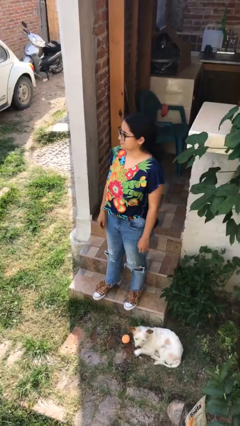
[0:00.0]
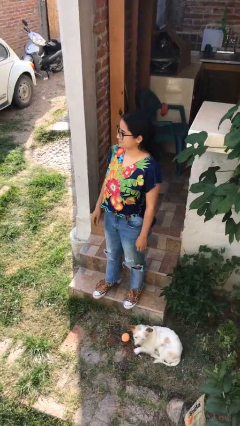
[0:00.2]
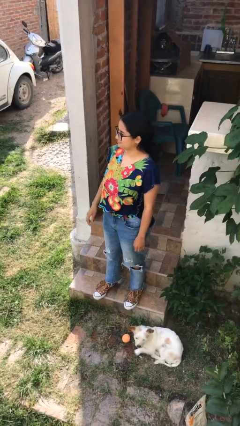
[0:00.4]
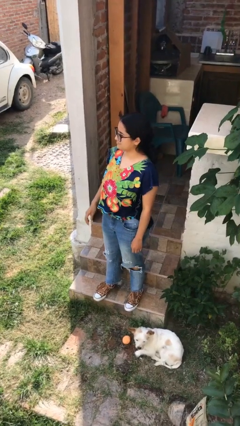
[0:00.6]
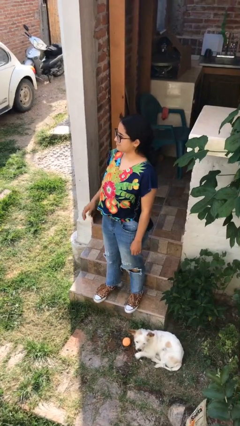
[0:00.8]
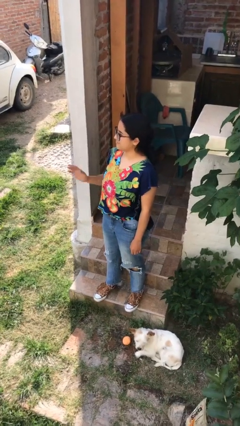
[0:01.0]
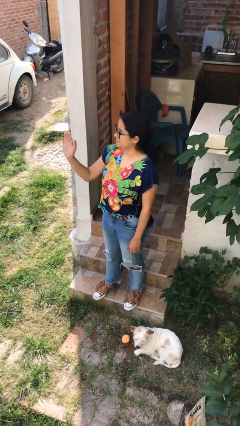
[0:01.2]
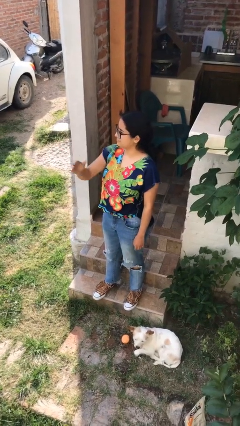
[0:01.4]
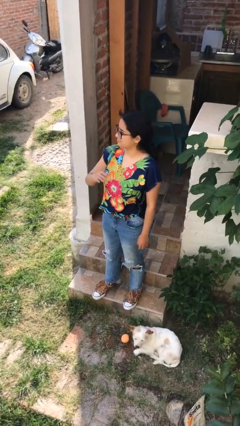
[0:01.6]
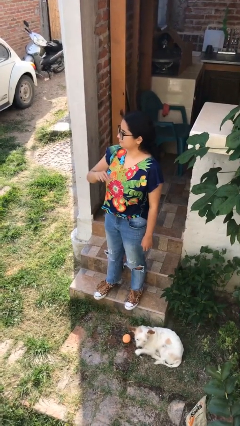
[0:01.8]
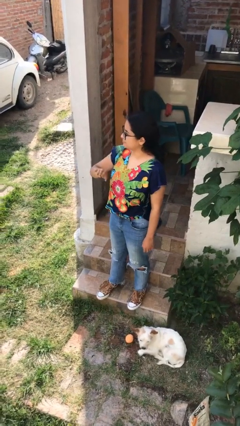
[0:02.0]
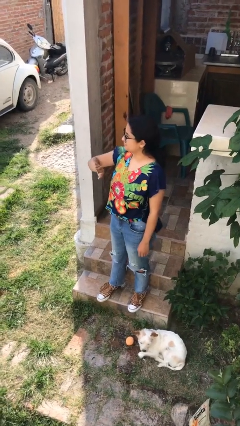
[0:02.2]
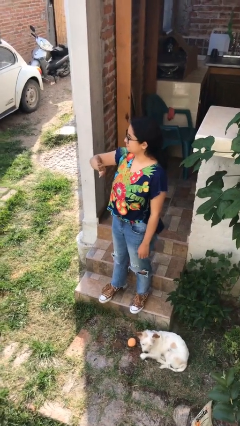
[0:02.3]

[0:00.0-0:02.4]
person gestures swipe left

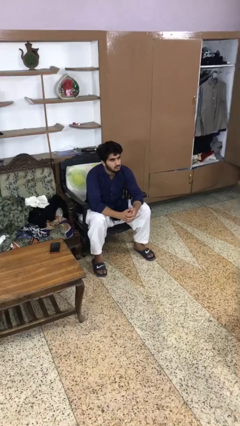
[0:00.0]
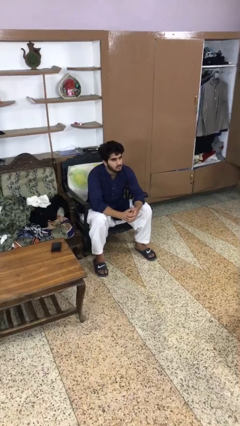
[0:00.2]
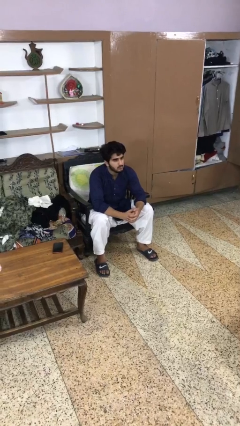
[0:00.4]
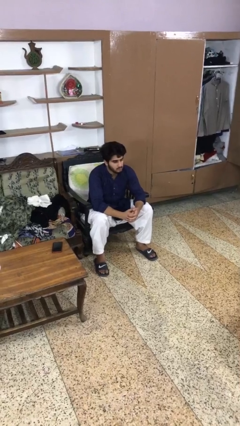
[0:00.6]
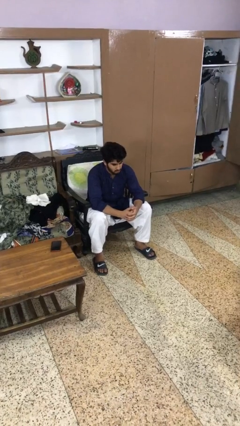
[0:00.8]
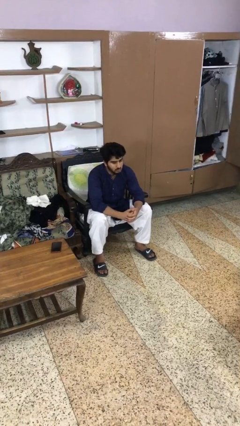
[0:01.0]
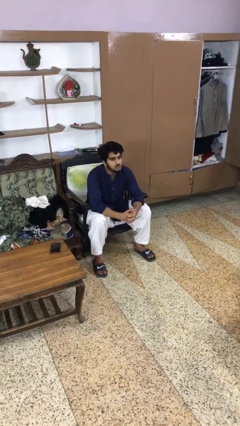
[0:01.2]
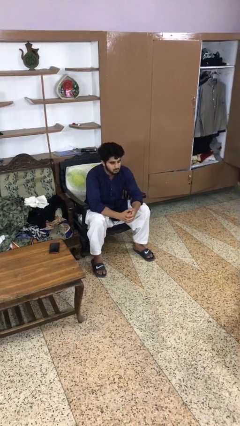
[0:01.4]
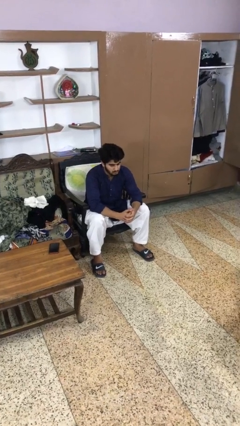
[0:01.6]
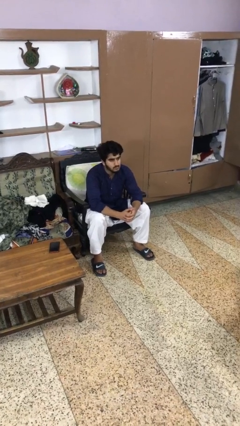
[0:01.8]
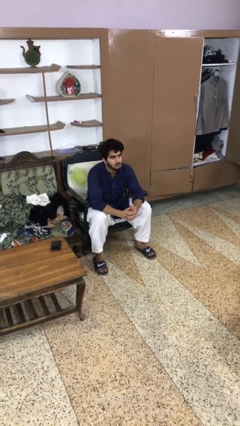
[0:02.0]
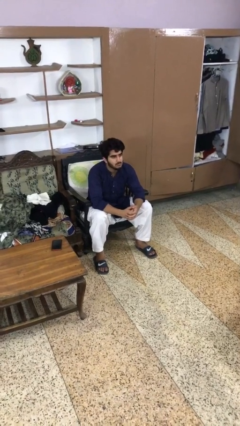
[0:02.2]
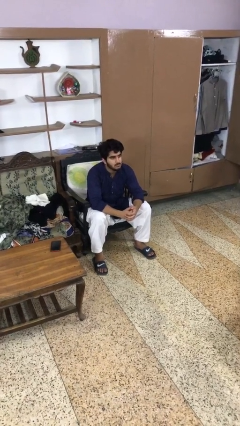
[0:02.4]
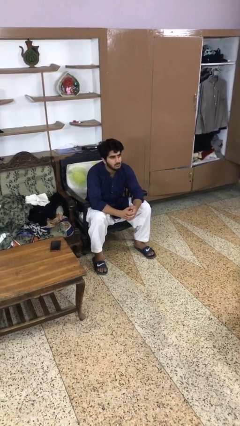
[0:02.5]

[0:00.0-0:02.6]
person nods head

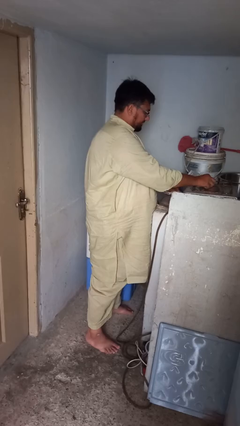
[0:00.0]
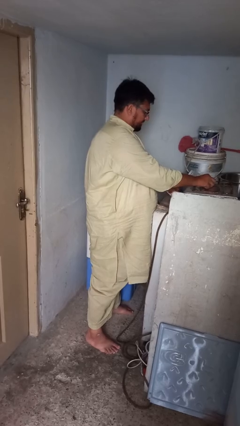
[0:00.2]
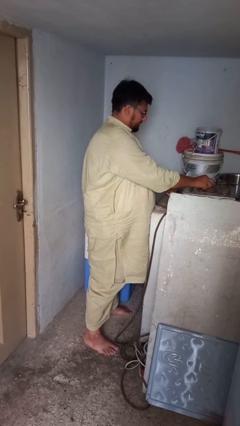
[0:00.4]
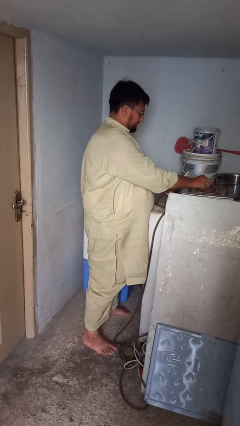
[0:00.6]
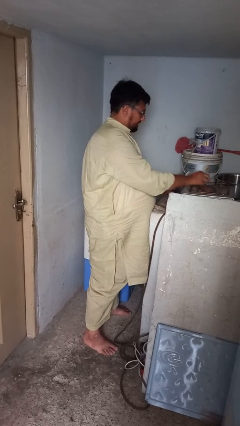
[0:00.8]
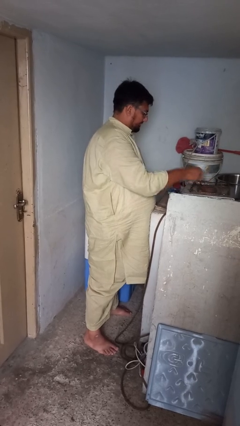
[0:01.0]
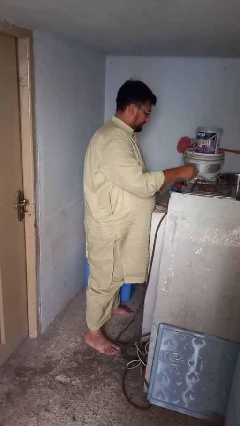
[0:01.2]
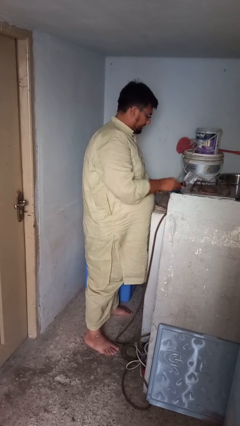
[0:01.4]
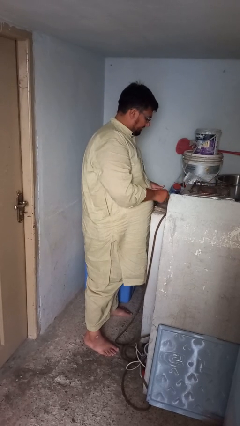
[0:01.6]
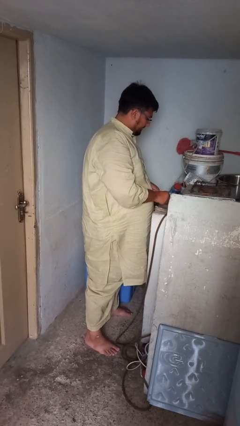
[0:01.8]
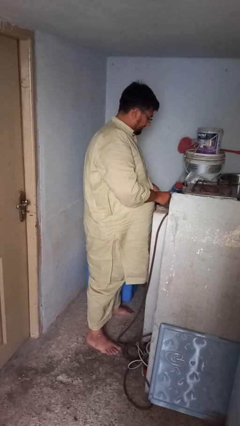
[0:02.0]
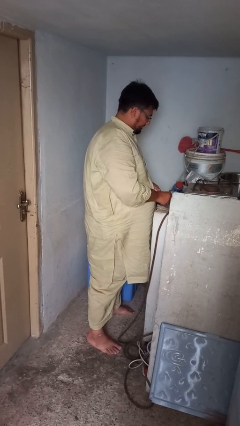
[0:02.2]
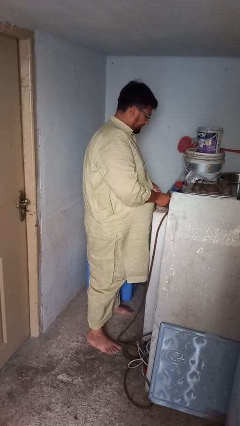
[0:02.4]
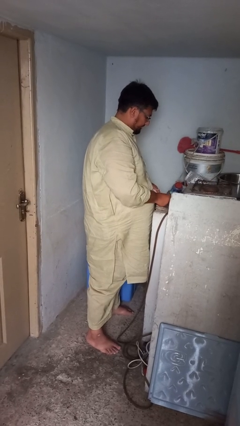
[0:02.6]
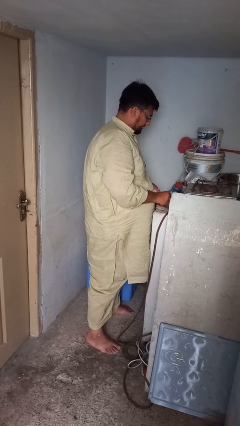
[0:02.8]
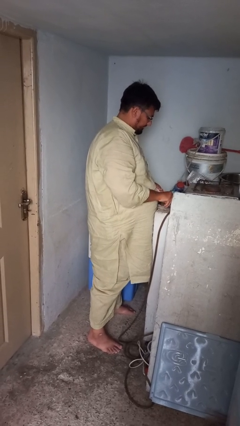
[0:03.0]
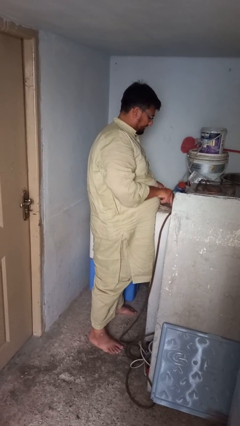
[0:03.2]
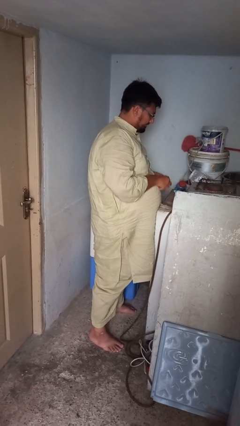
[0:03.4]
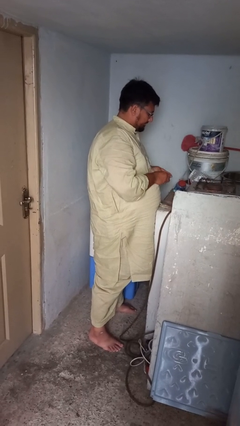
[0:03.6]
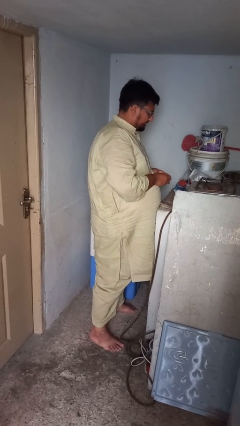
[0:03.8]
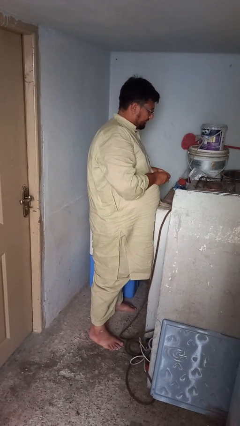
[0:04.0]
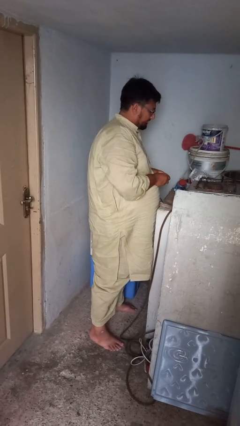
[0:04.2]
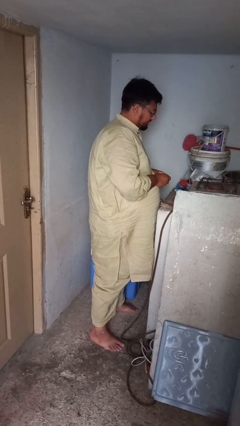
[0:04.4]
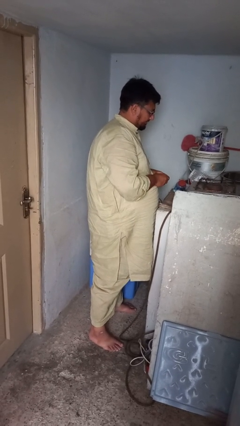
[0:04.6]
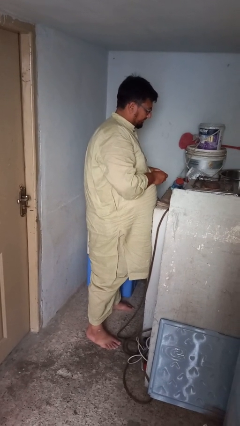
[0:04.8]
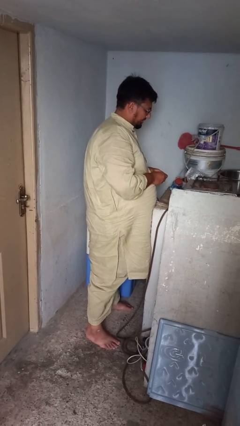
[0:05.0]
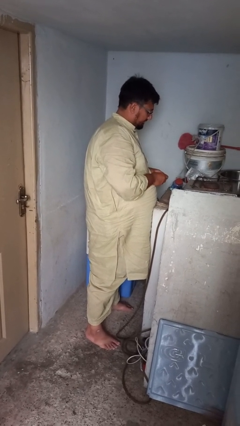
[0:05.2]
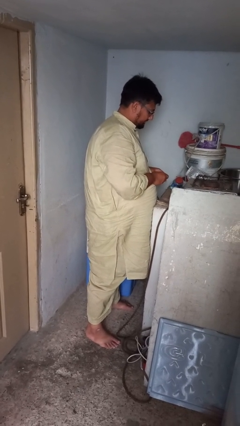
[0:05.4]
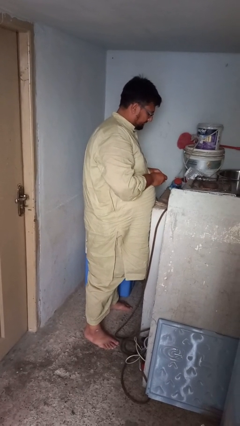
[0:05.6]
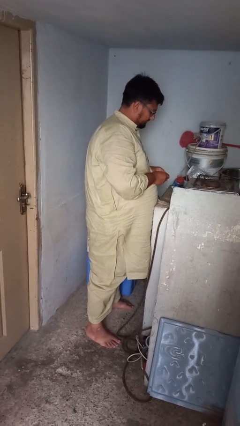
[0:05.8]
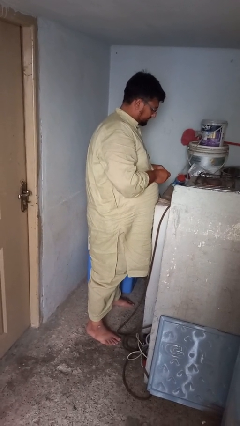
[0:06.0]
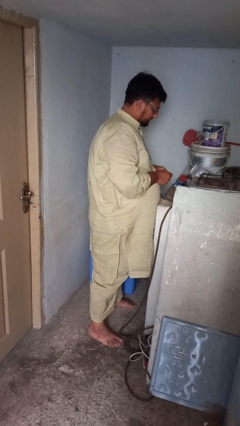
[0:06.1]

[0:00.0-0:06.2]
person turns off stovetop

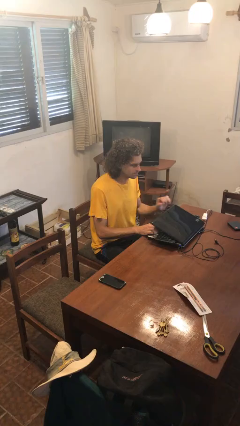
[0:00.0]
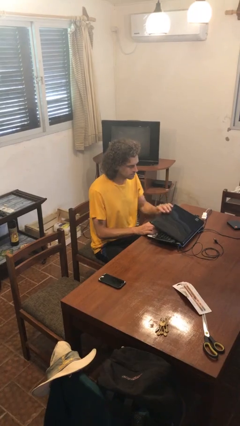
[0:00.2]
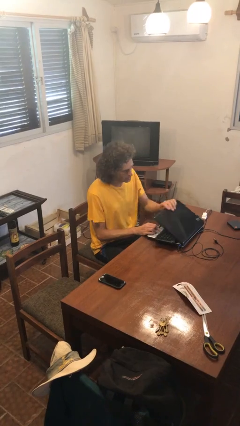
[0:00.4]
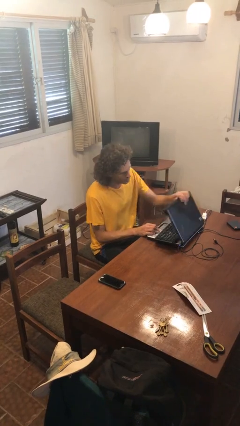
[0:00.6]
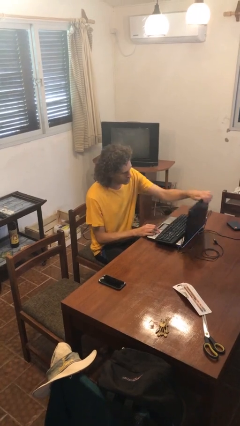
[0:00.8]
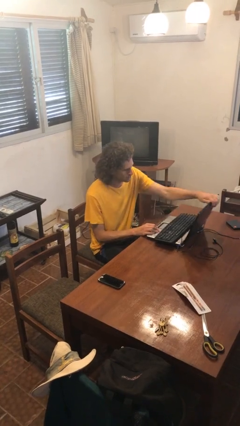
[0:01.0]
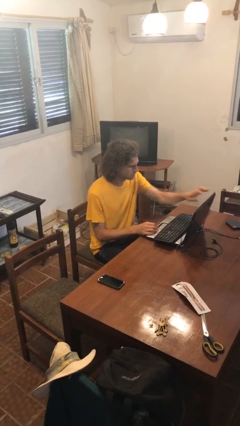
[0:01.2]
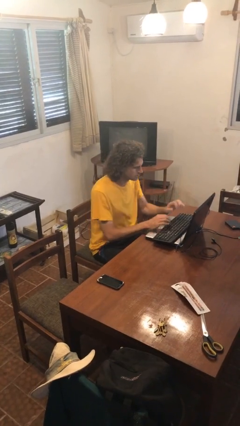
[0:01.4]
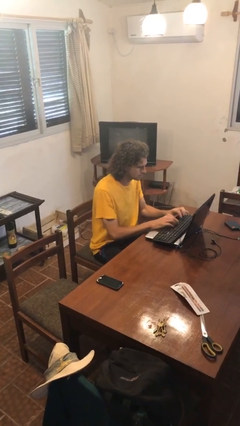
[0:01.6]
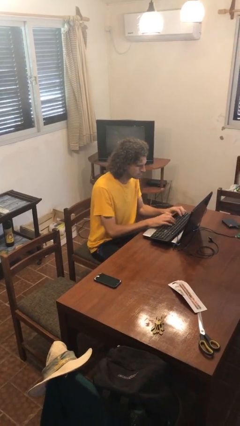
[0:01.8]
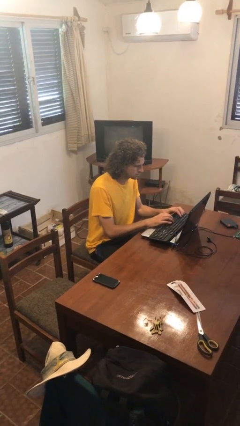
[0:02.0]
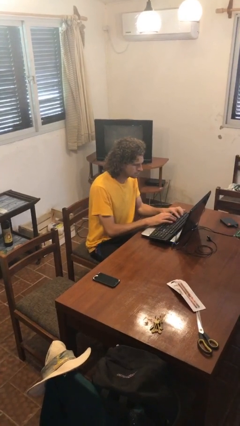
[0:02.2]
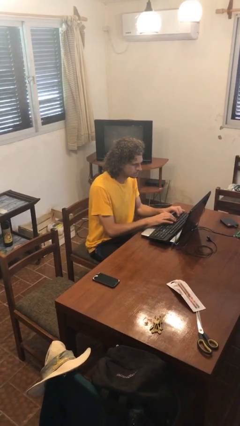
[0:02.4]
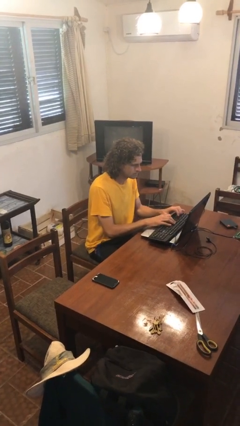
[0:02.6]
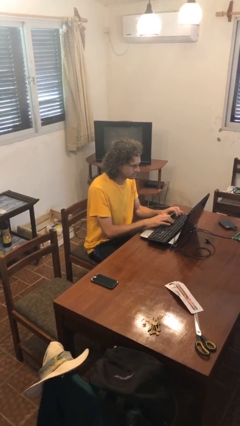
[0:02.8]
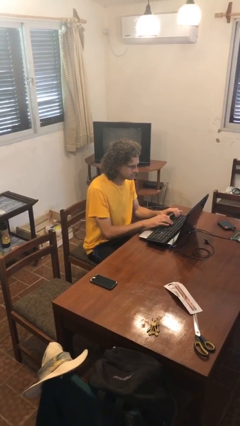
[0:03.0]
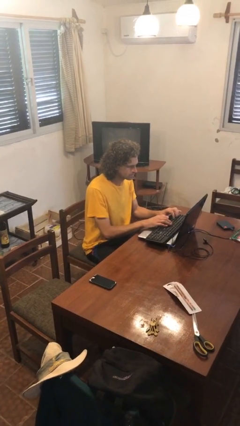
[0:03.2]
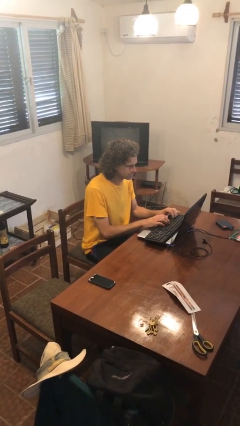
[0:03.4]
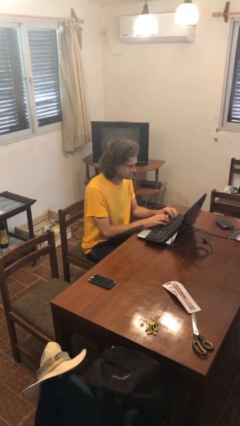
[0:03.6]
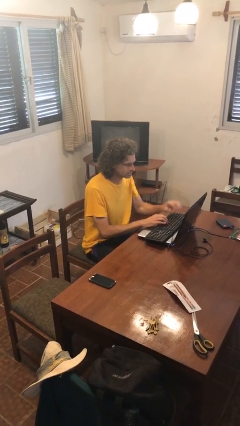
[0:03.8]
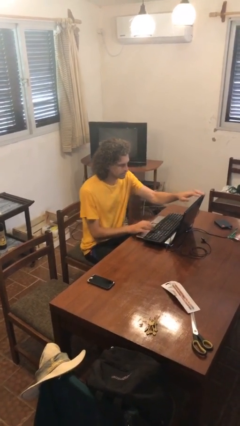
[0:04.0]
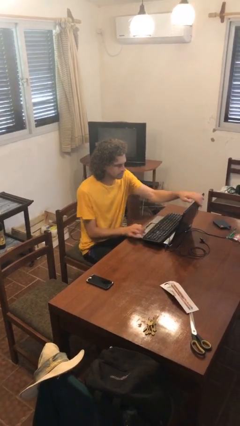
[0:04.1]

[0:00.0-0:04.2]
person interacts with laptop

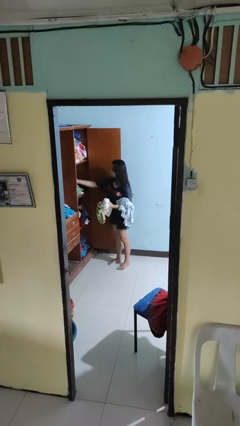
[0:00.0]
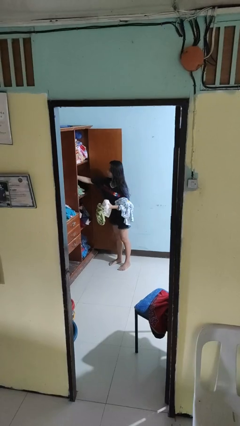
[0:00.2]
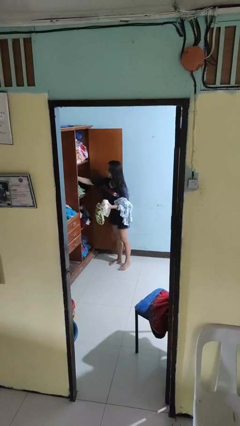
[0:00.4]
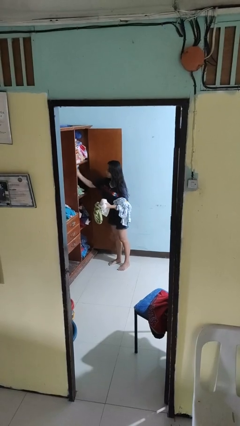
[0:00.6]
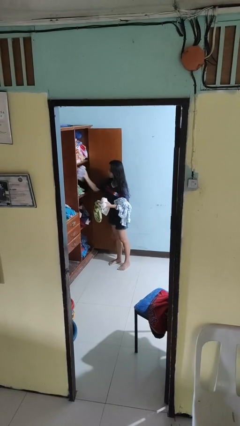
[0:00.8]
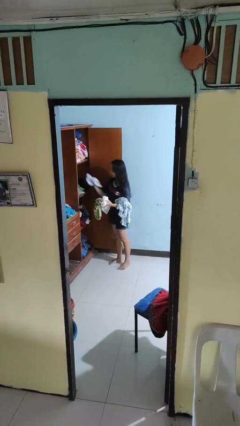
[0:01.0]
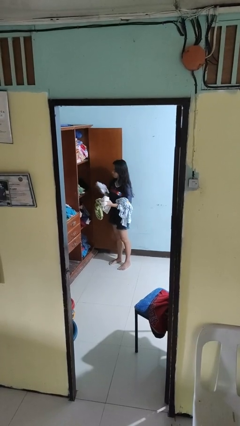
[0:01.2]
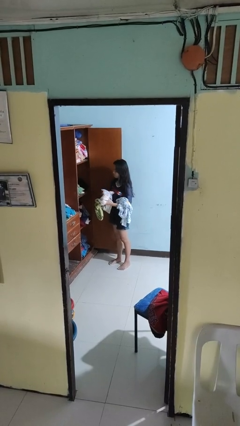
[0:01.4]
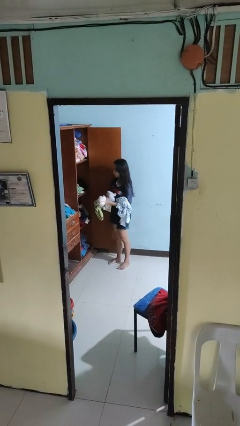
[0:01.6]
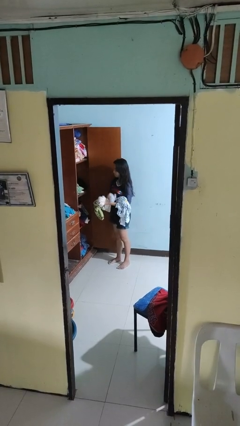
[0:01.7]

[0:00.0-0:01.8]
person takes clothes from dresser

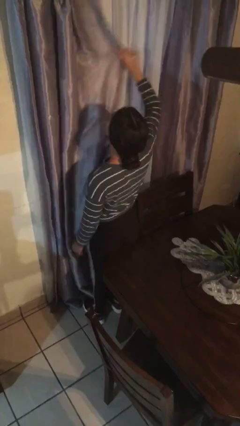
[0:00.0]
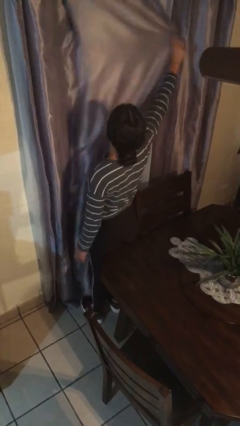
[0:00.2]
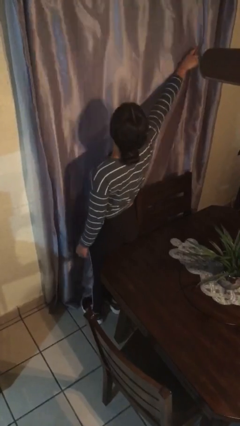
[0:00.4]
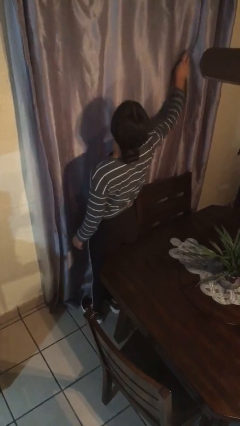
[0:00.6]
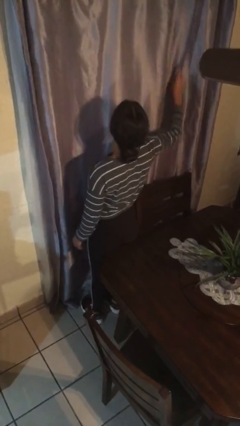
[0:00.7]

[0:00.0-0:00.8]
person closes curtains
